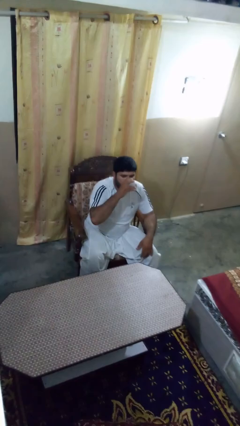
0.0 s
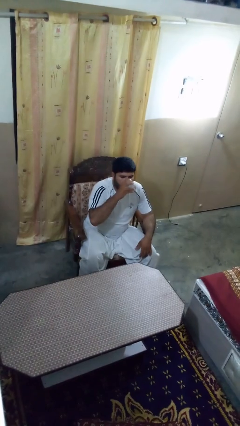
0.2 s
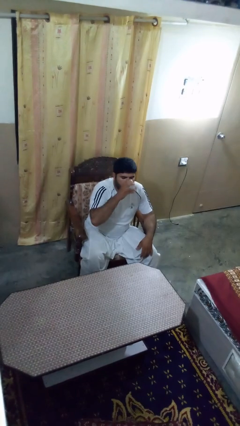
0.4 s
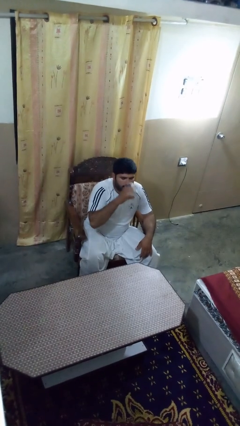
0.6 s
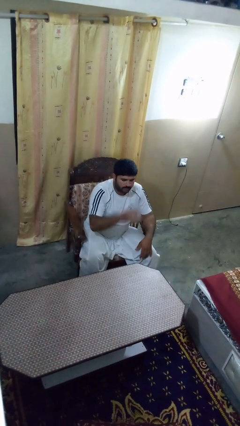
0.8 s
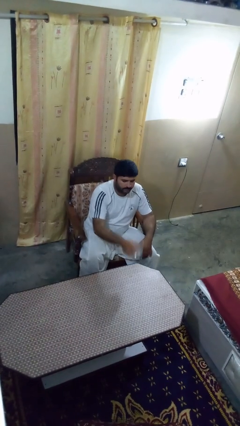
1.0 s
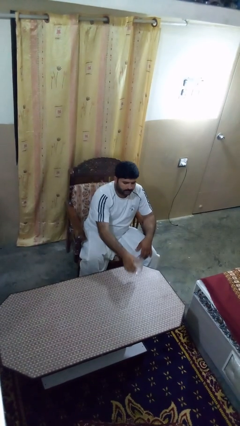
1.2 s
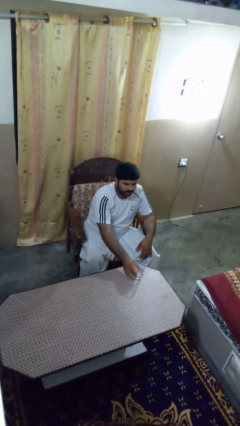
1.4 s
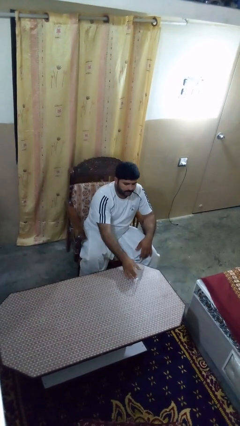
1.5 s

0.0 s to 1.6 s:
person puts down object on table

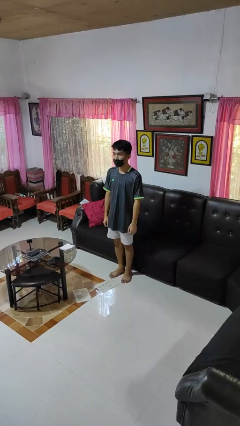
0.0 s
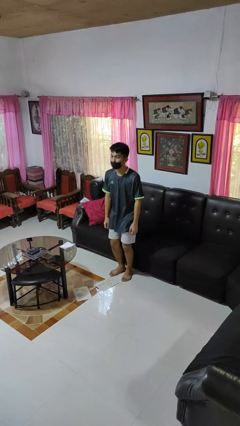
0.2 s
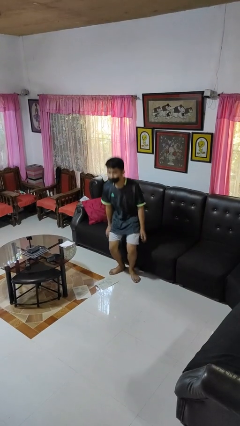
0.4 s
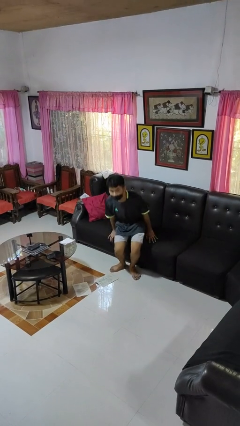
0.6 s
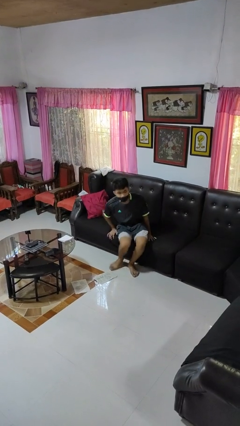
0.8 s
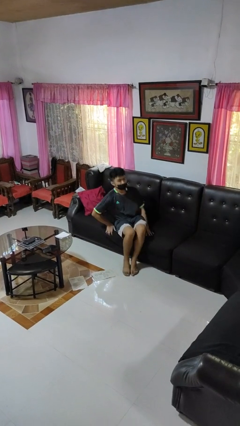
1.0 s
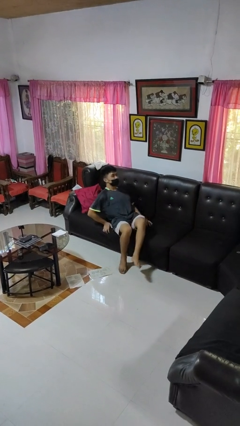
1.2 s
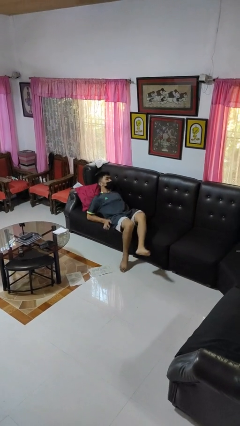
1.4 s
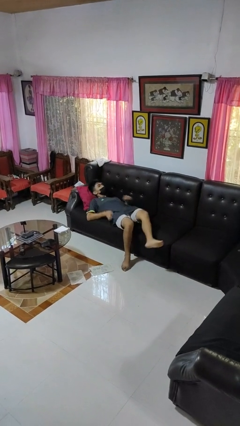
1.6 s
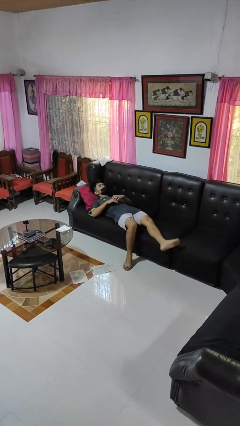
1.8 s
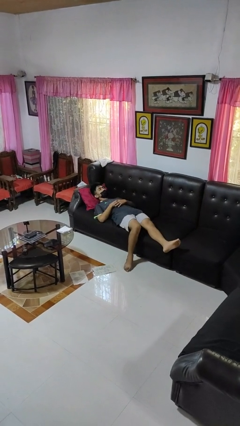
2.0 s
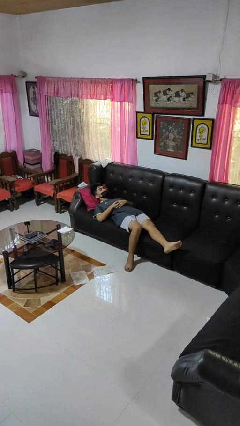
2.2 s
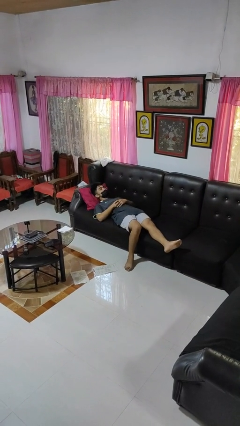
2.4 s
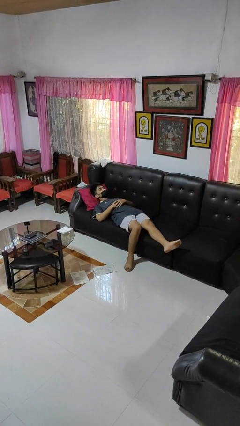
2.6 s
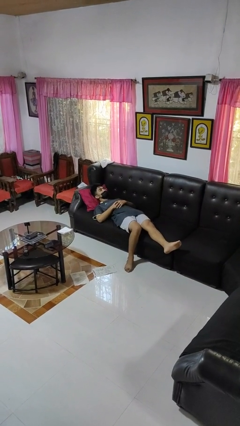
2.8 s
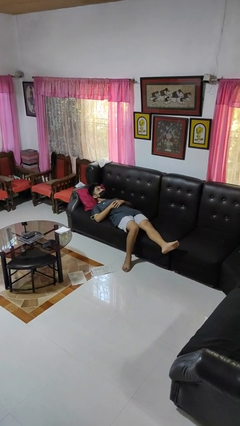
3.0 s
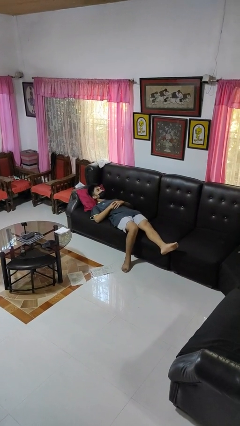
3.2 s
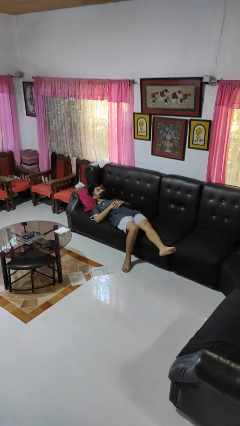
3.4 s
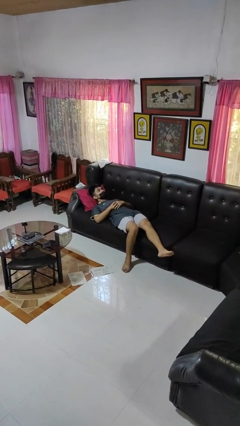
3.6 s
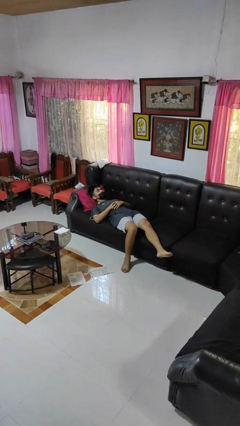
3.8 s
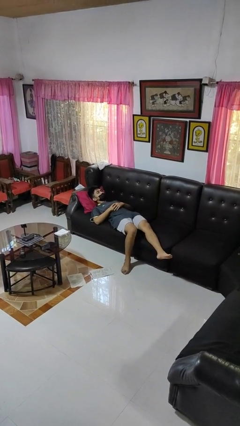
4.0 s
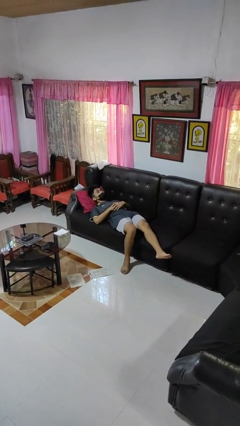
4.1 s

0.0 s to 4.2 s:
person lies down on couch

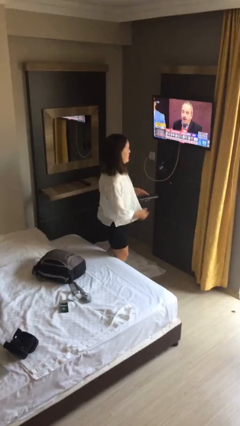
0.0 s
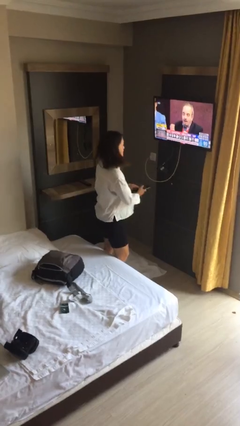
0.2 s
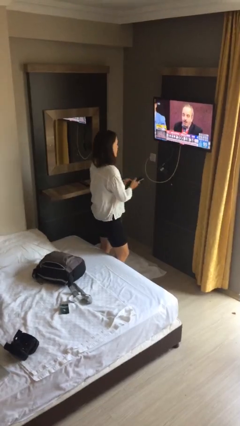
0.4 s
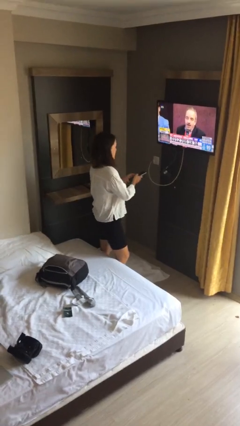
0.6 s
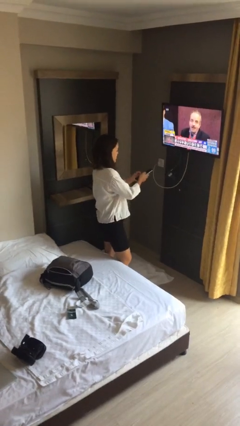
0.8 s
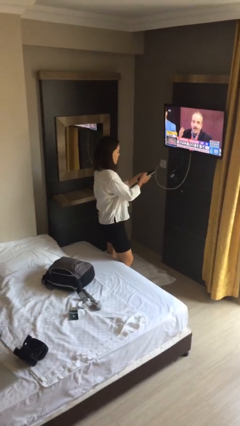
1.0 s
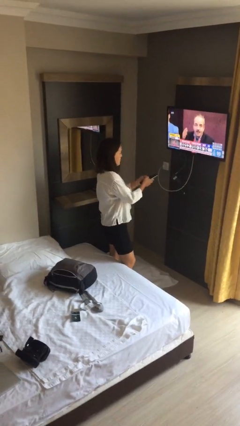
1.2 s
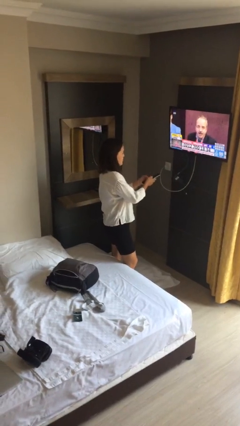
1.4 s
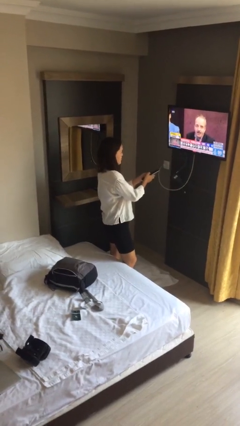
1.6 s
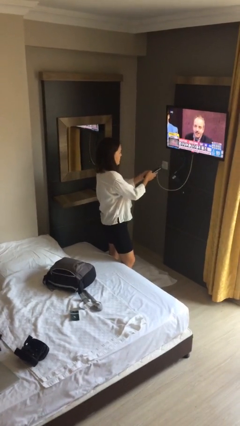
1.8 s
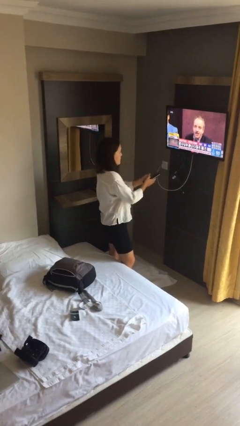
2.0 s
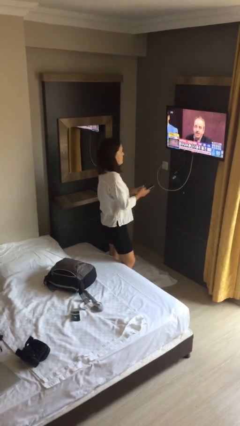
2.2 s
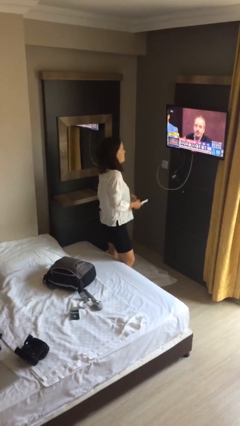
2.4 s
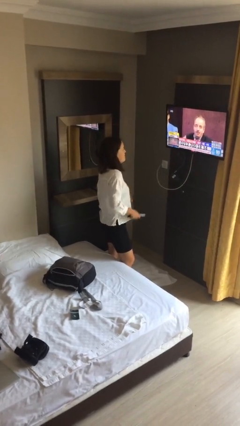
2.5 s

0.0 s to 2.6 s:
person uses television remote

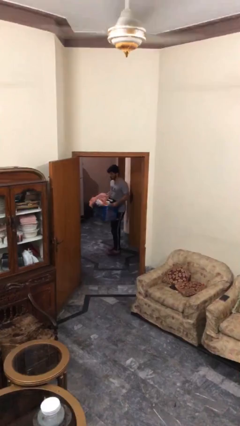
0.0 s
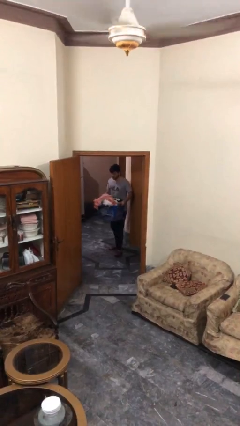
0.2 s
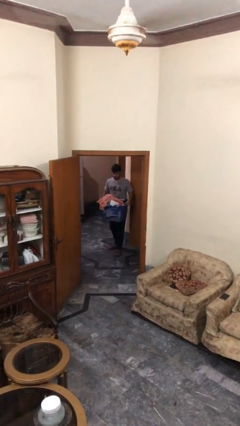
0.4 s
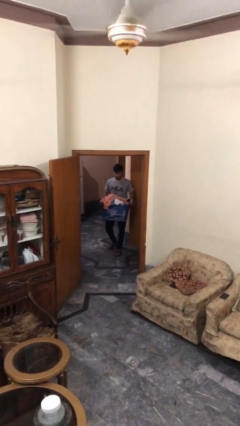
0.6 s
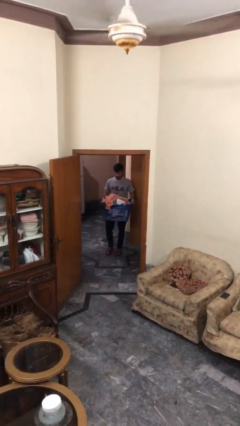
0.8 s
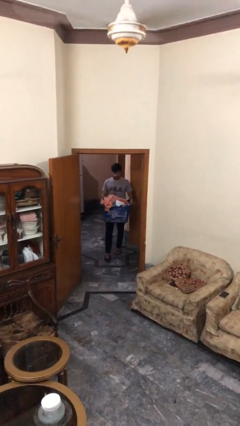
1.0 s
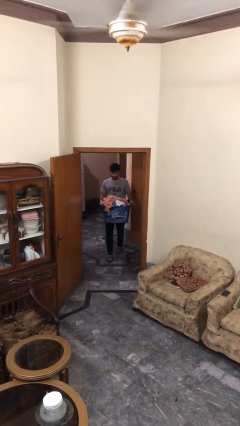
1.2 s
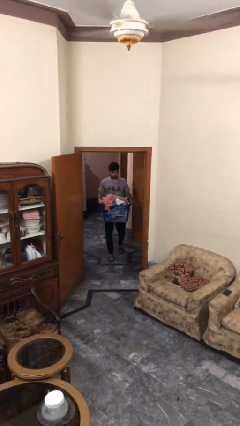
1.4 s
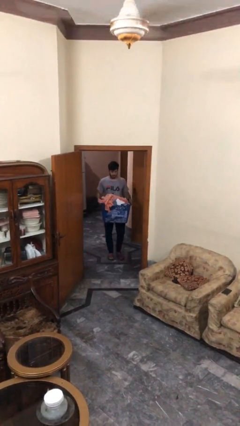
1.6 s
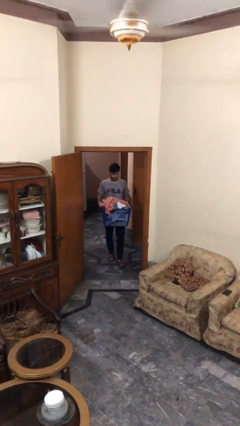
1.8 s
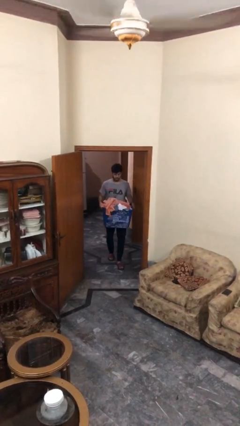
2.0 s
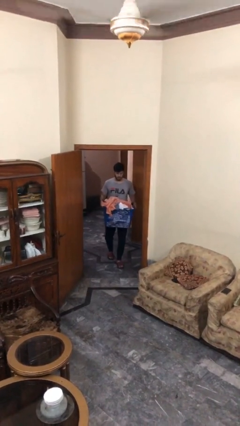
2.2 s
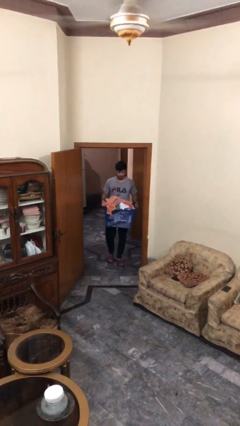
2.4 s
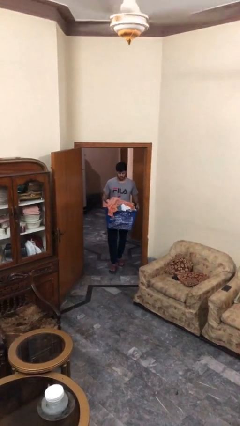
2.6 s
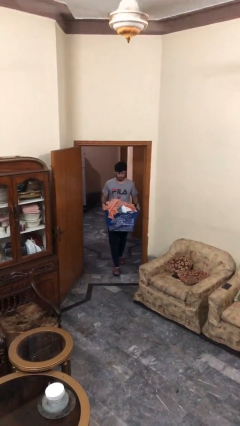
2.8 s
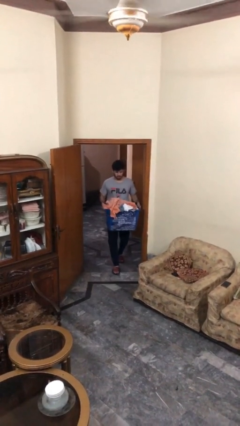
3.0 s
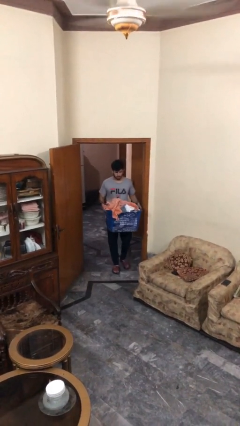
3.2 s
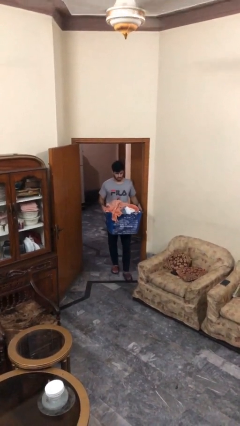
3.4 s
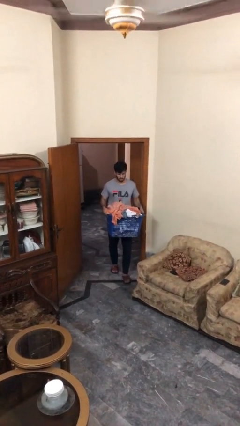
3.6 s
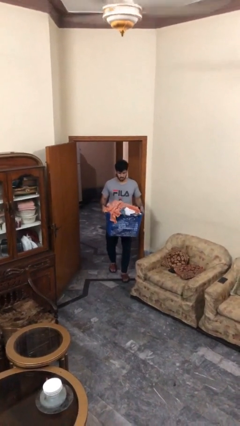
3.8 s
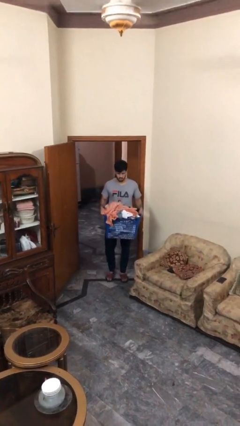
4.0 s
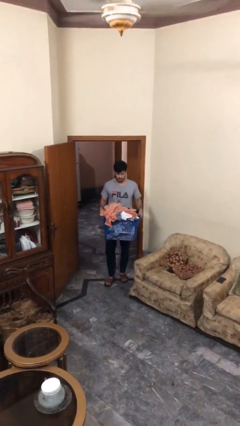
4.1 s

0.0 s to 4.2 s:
person carries laundry basket

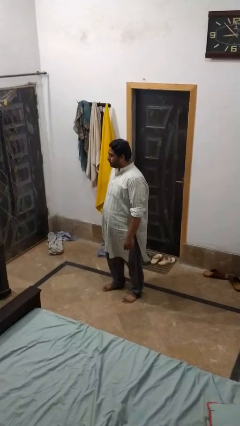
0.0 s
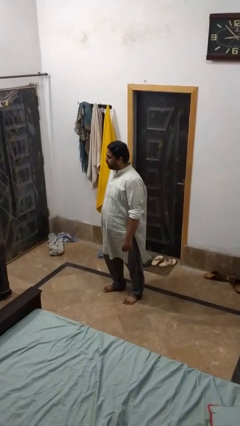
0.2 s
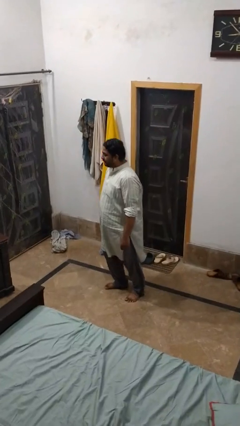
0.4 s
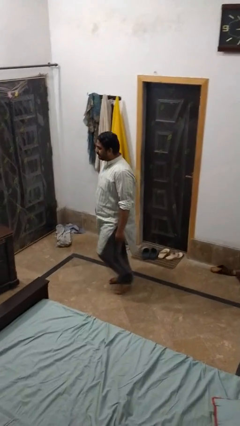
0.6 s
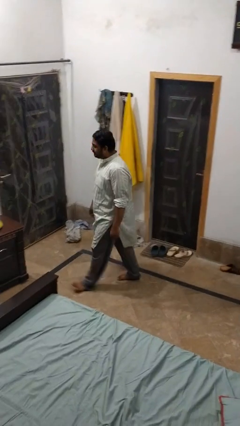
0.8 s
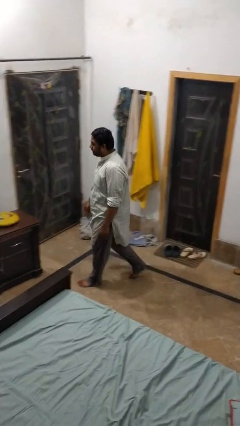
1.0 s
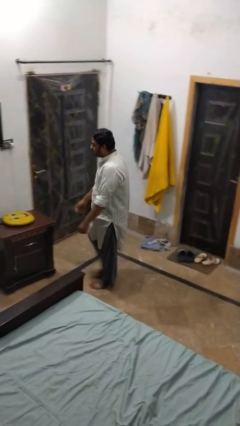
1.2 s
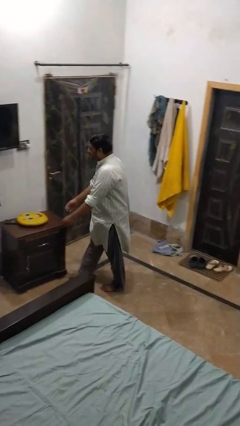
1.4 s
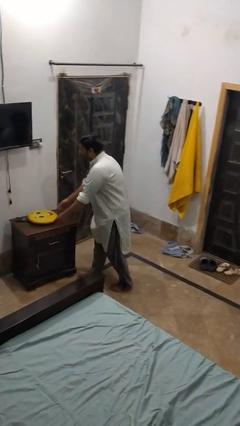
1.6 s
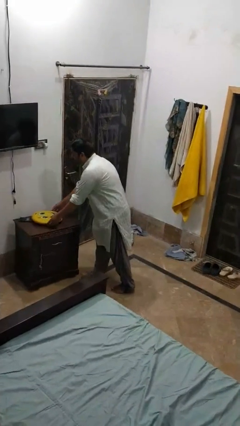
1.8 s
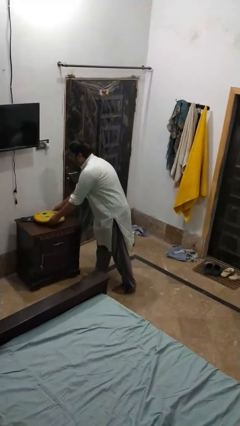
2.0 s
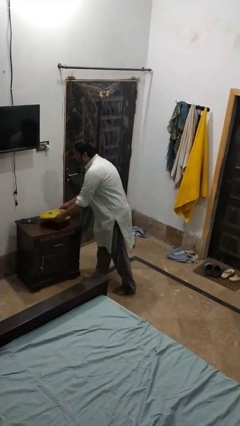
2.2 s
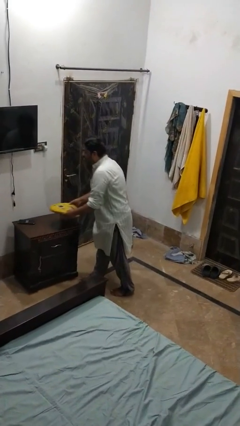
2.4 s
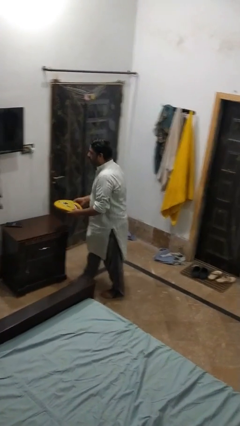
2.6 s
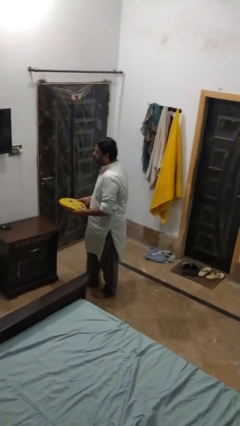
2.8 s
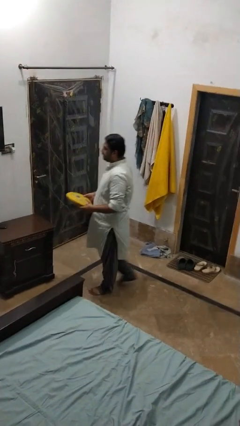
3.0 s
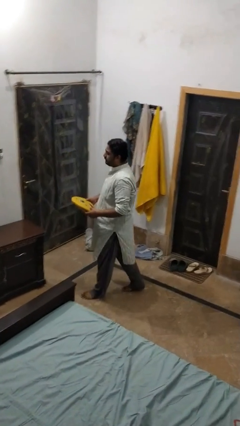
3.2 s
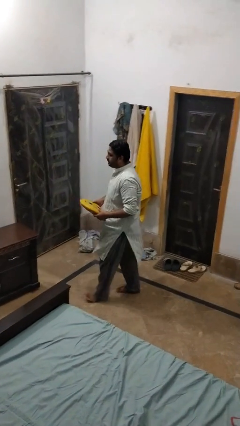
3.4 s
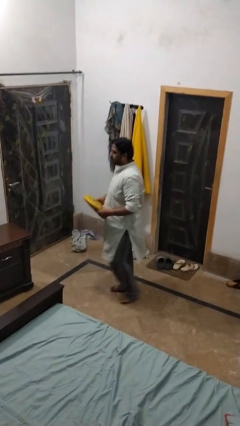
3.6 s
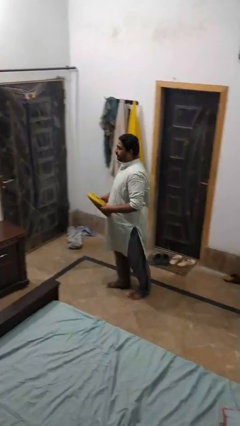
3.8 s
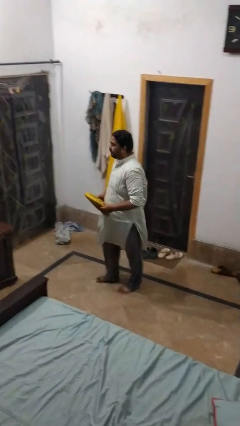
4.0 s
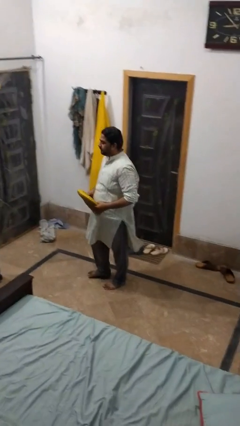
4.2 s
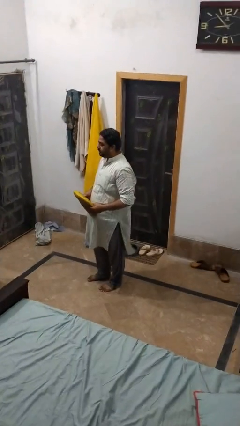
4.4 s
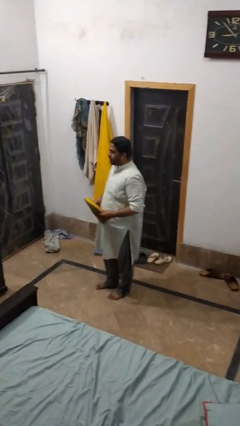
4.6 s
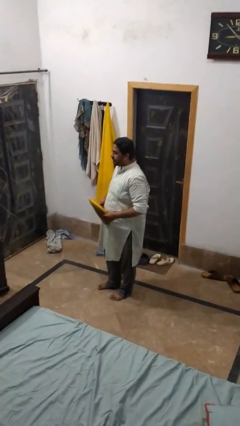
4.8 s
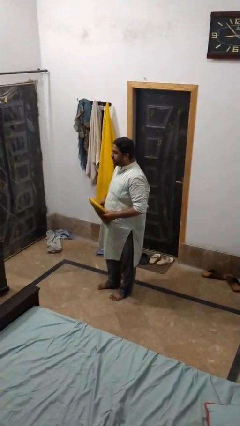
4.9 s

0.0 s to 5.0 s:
person picks up object from table

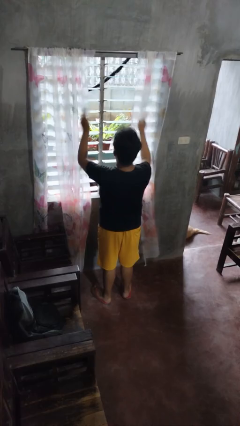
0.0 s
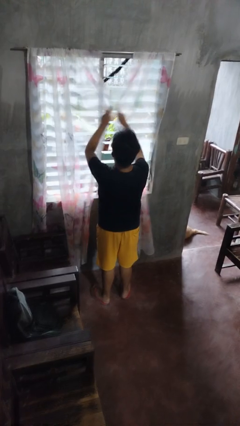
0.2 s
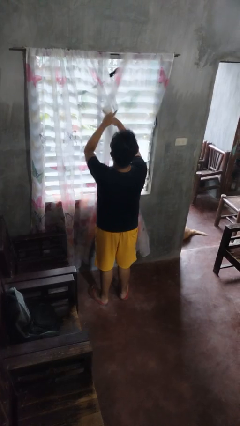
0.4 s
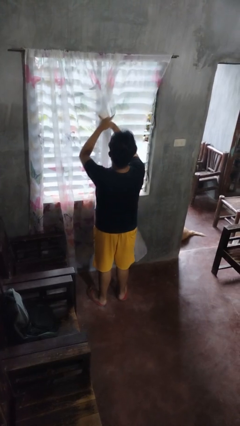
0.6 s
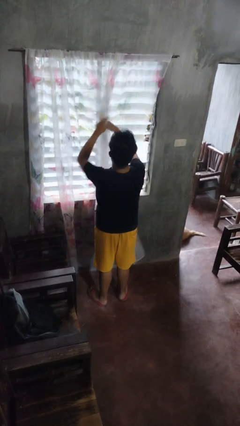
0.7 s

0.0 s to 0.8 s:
person closes curtains
